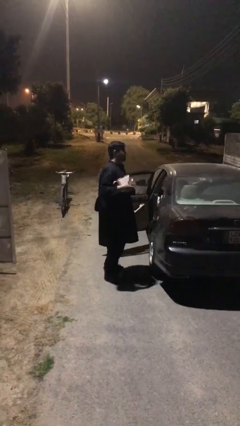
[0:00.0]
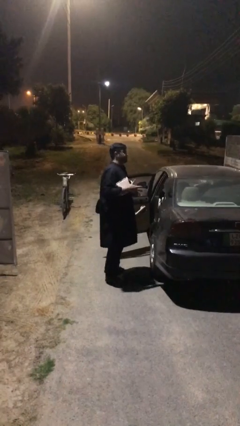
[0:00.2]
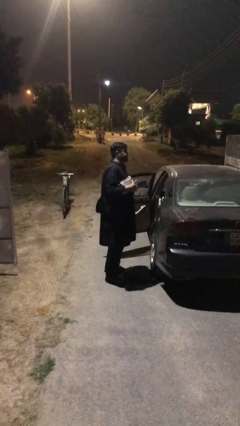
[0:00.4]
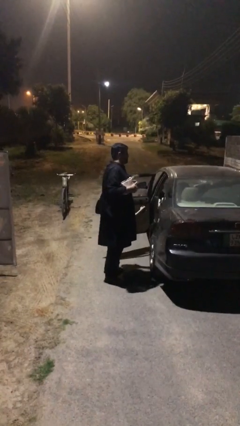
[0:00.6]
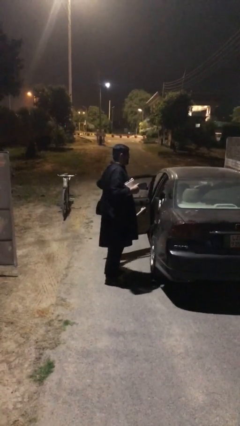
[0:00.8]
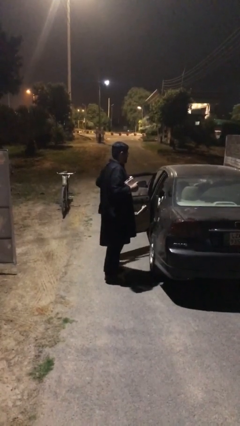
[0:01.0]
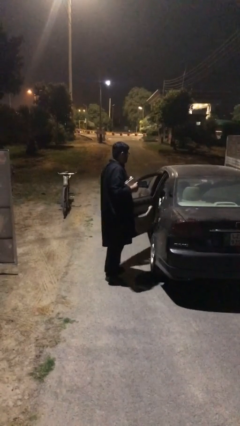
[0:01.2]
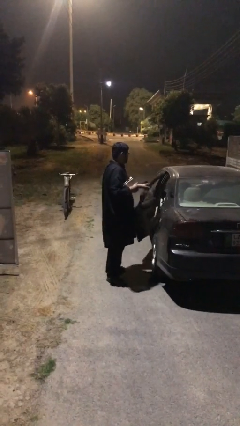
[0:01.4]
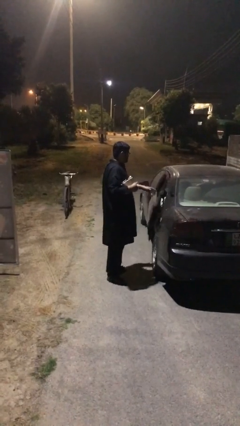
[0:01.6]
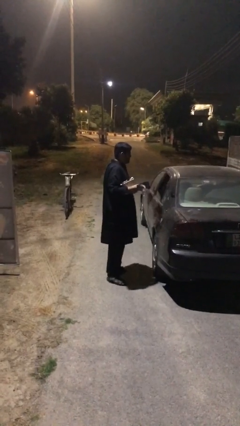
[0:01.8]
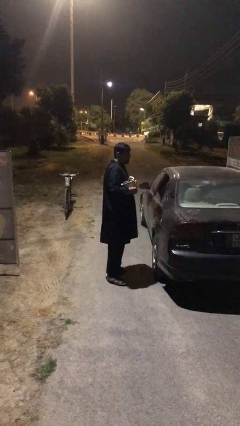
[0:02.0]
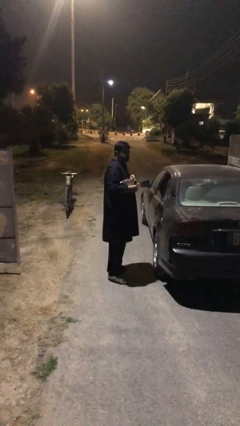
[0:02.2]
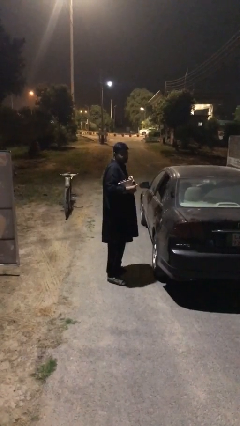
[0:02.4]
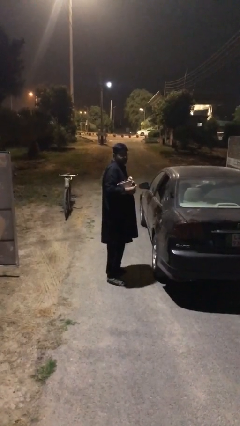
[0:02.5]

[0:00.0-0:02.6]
person closes car door

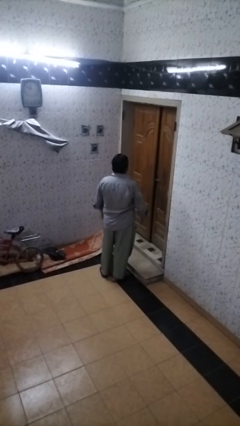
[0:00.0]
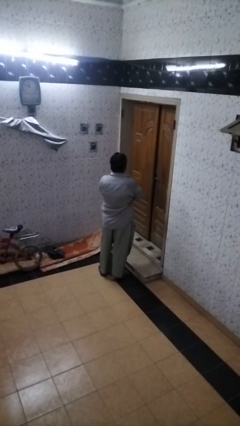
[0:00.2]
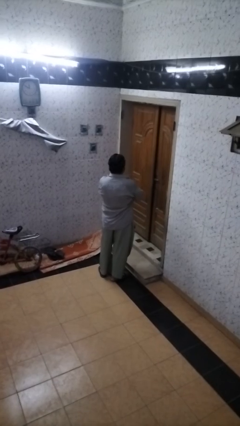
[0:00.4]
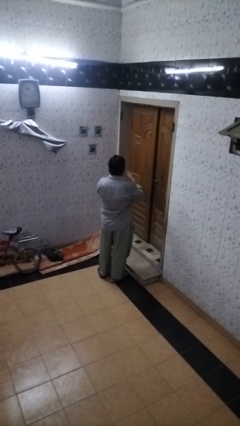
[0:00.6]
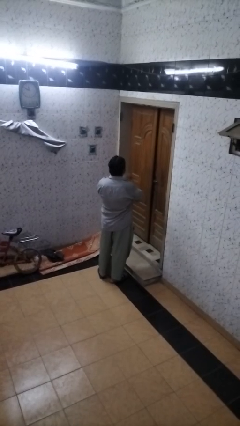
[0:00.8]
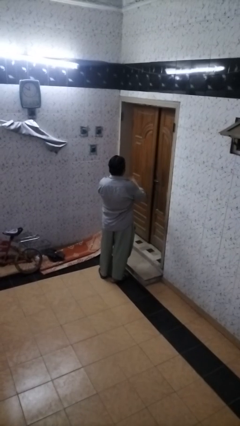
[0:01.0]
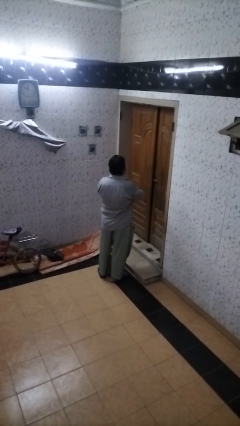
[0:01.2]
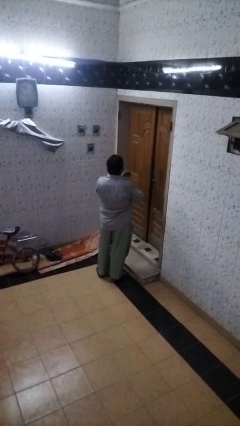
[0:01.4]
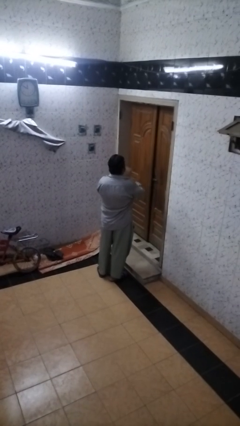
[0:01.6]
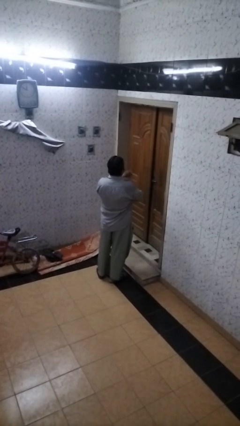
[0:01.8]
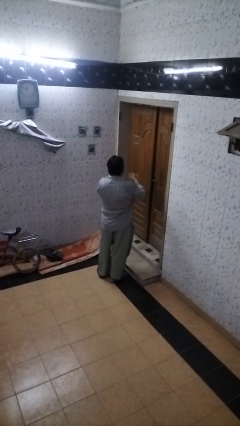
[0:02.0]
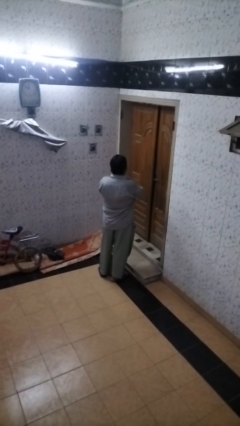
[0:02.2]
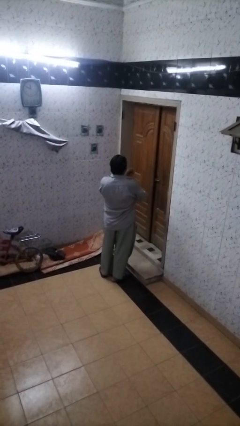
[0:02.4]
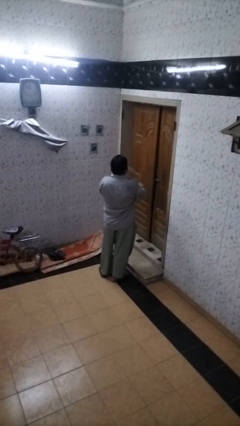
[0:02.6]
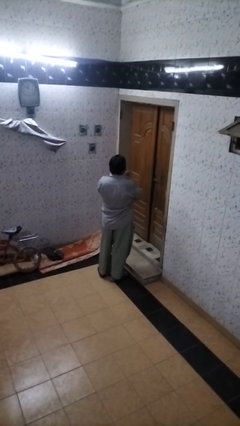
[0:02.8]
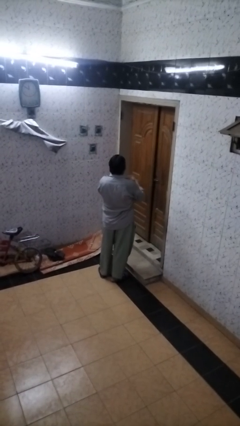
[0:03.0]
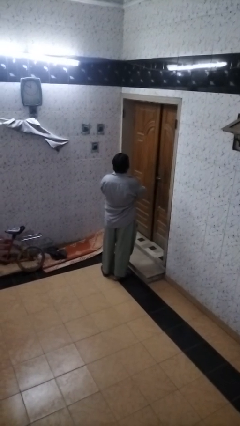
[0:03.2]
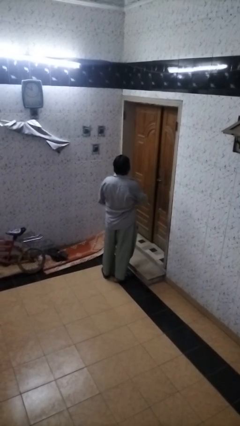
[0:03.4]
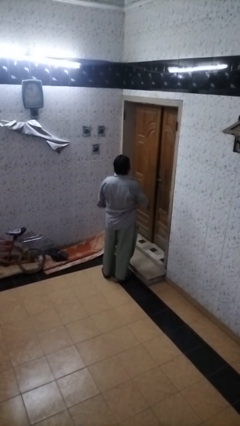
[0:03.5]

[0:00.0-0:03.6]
person drums on chest

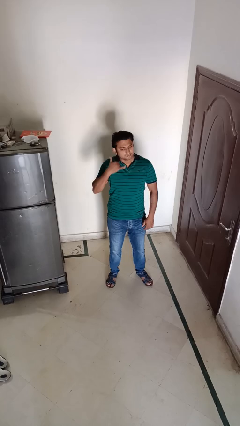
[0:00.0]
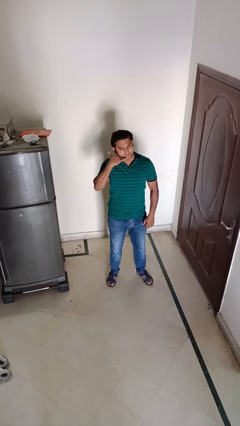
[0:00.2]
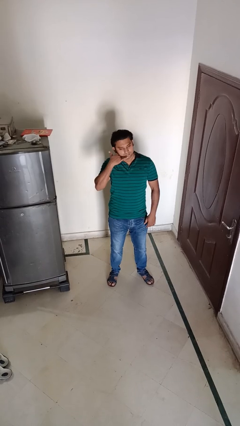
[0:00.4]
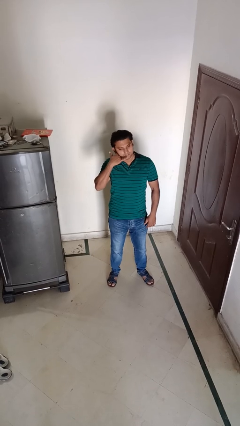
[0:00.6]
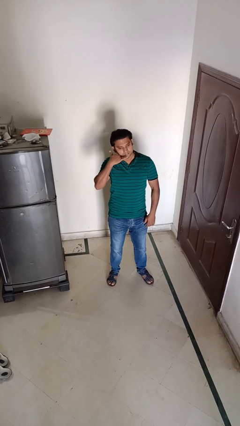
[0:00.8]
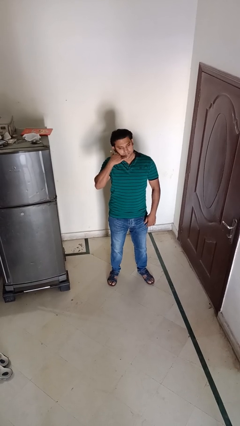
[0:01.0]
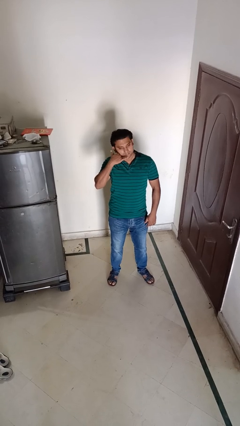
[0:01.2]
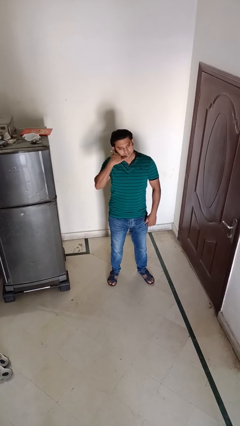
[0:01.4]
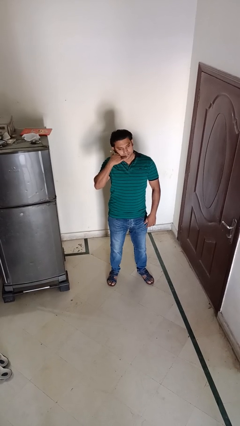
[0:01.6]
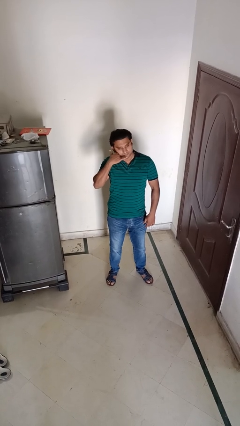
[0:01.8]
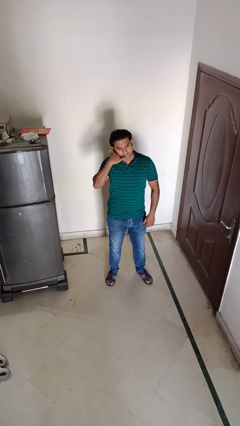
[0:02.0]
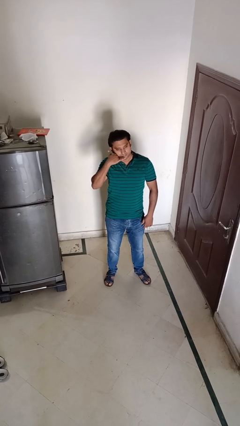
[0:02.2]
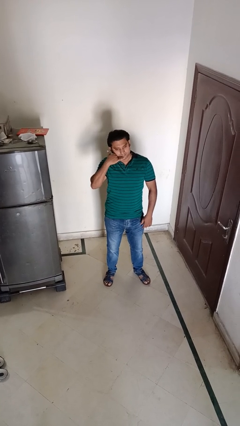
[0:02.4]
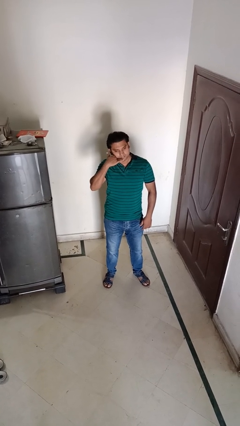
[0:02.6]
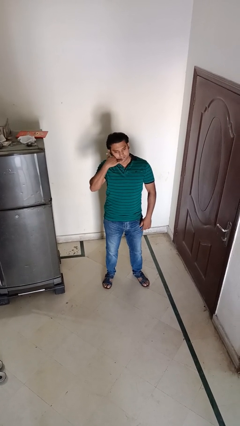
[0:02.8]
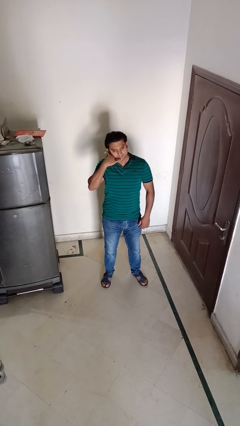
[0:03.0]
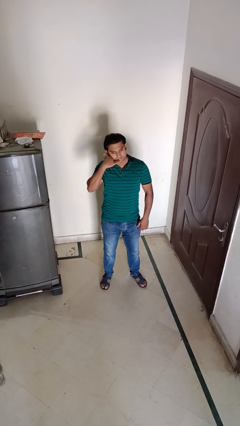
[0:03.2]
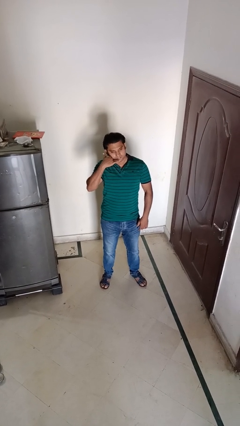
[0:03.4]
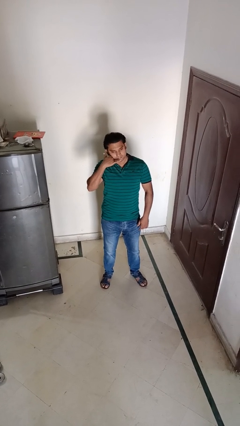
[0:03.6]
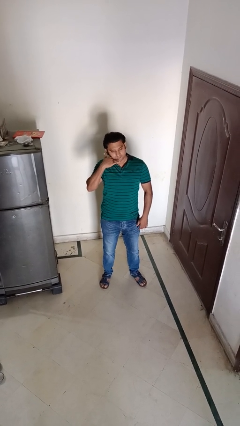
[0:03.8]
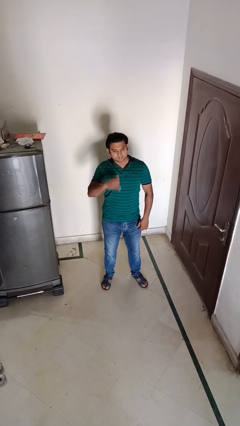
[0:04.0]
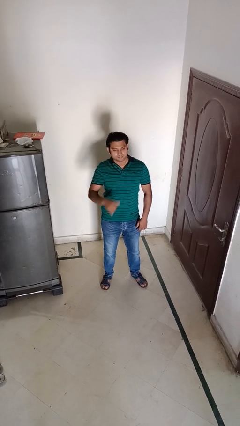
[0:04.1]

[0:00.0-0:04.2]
person gestures call me

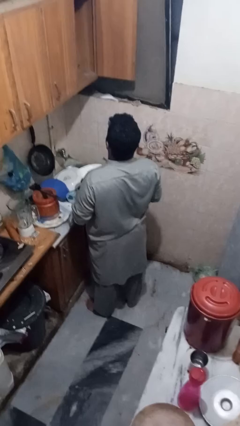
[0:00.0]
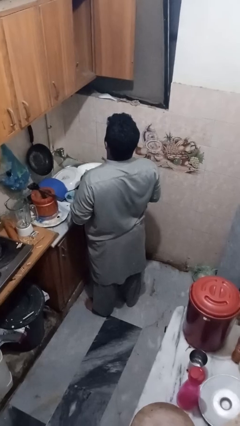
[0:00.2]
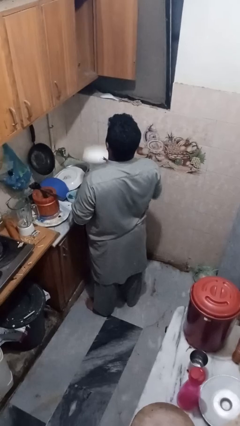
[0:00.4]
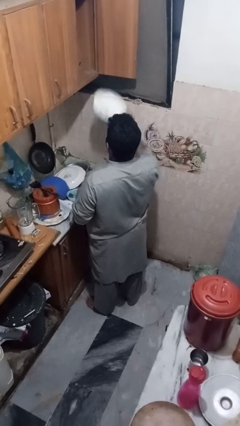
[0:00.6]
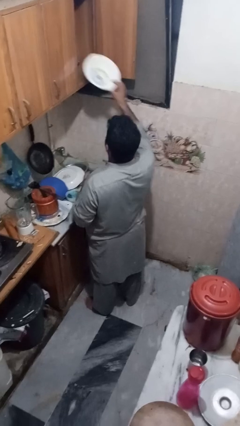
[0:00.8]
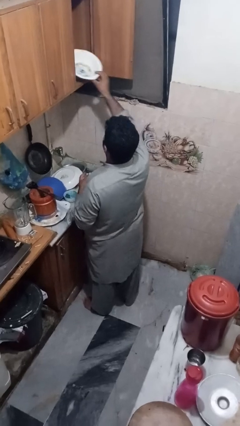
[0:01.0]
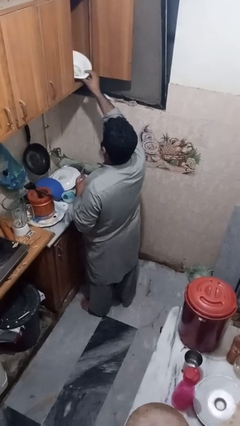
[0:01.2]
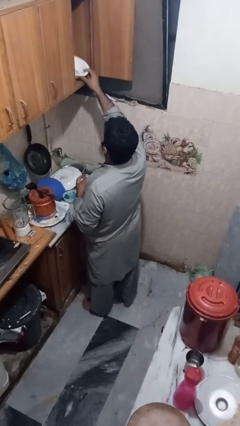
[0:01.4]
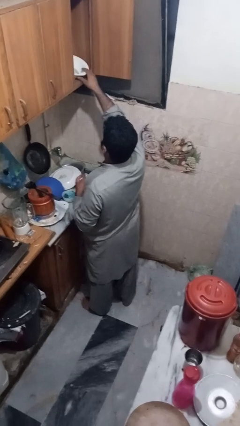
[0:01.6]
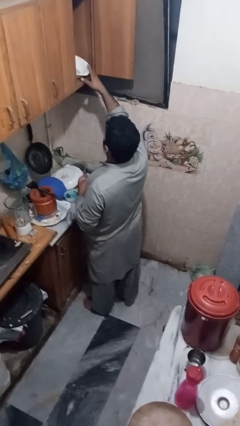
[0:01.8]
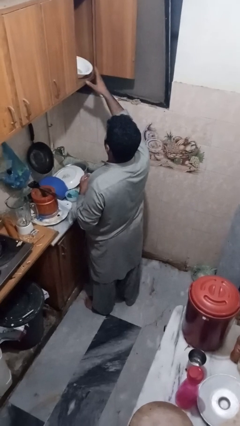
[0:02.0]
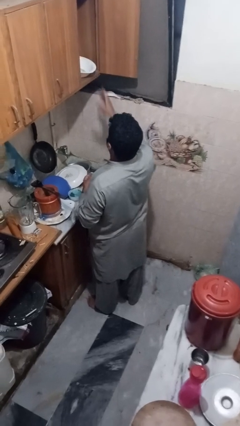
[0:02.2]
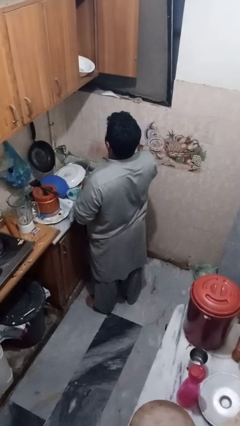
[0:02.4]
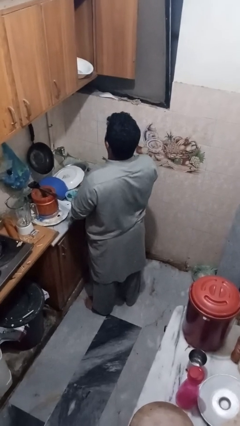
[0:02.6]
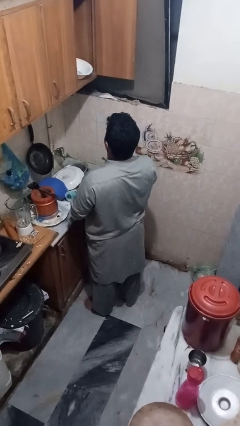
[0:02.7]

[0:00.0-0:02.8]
person puts object in cabinet

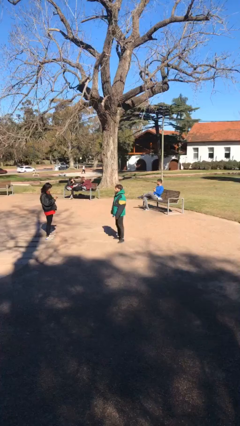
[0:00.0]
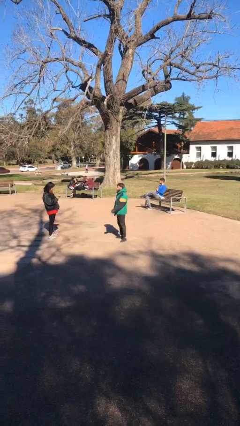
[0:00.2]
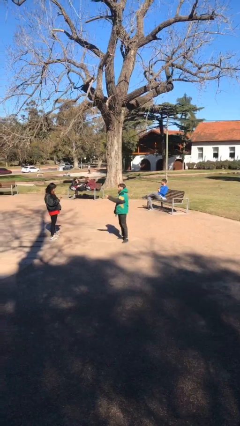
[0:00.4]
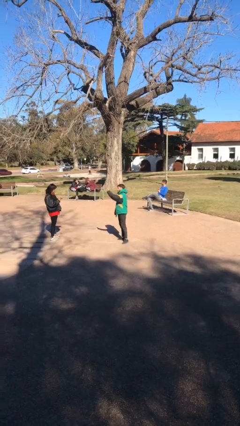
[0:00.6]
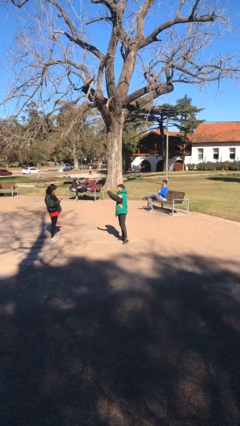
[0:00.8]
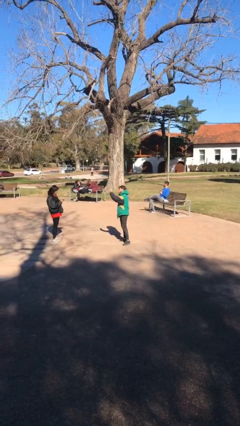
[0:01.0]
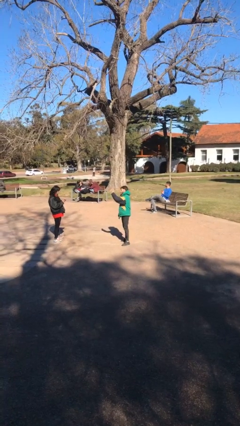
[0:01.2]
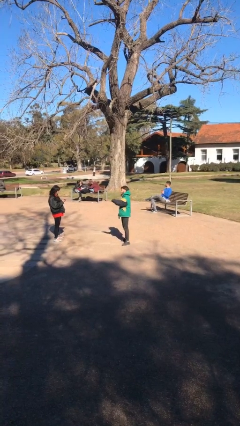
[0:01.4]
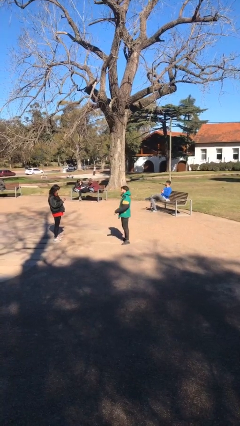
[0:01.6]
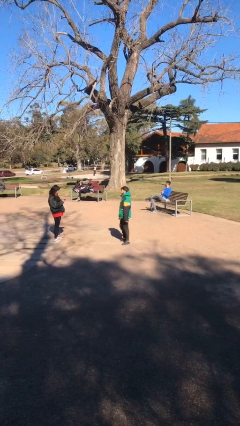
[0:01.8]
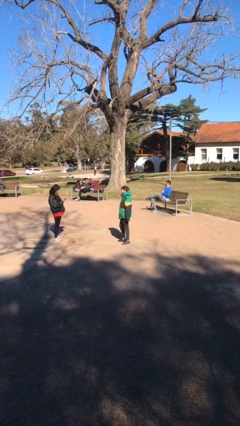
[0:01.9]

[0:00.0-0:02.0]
person waves at person

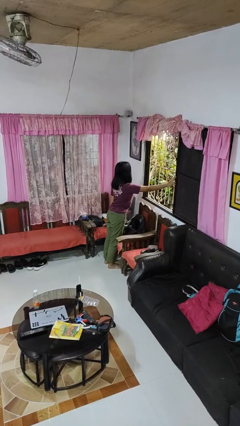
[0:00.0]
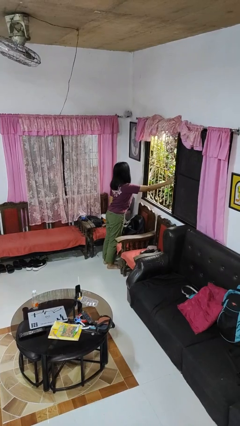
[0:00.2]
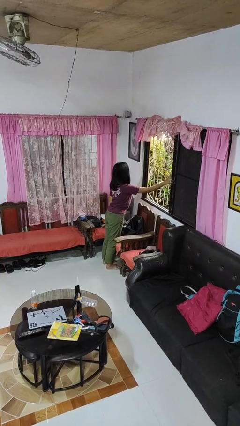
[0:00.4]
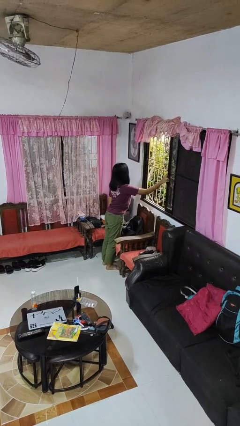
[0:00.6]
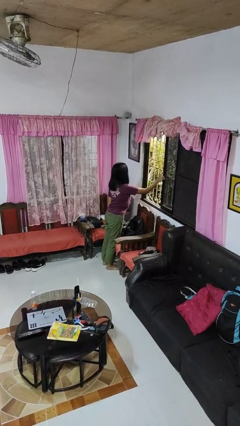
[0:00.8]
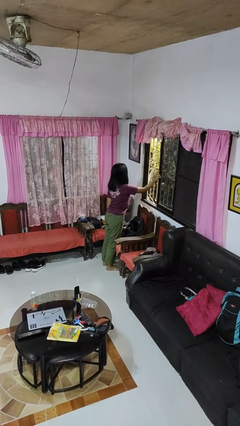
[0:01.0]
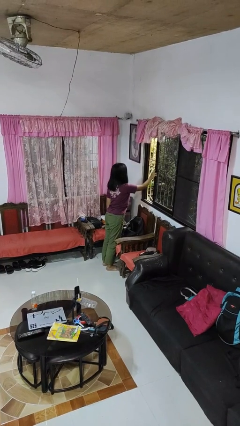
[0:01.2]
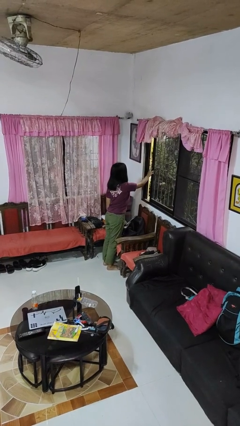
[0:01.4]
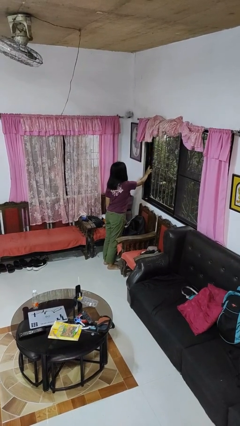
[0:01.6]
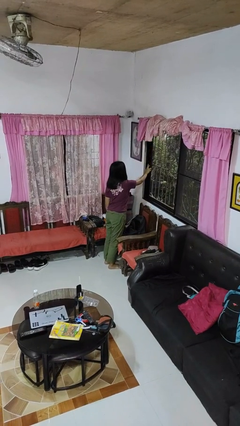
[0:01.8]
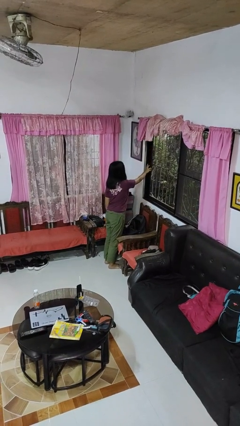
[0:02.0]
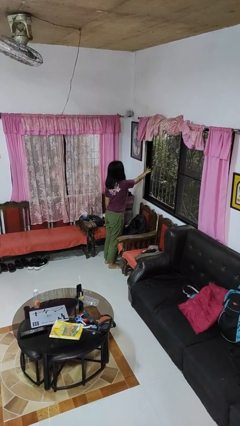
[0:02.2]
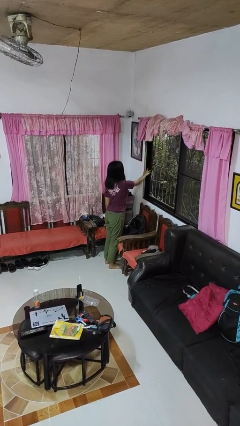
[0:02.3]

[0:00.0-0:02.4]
person closes home window
